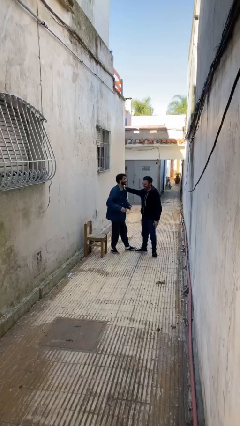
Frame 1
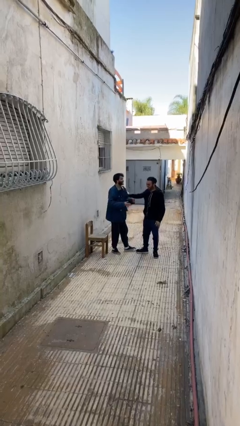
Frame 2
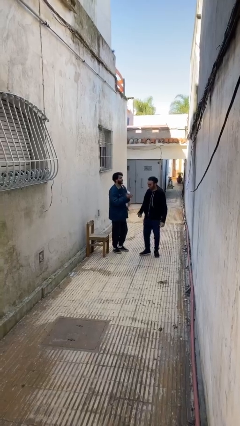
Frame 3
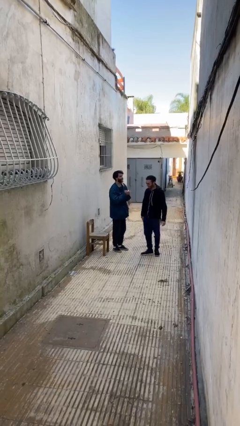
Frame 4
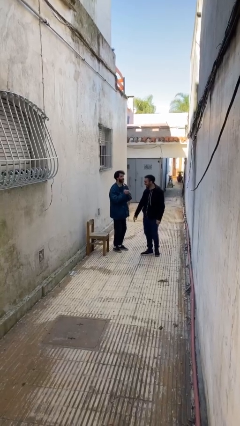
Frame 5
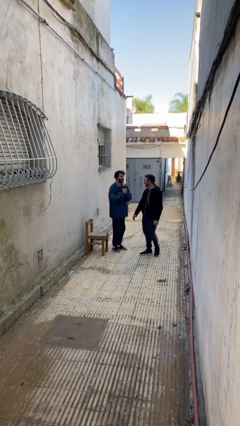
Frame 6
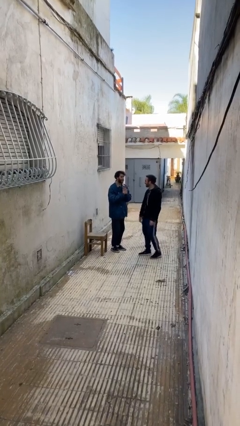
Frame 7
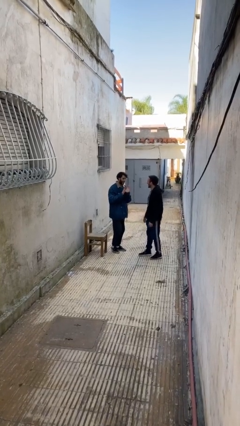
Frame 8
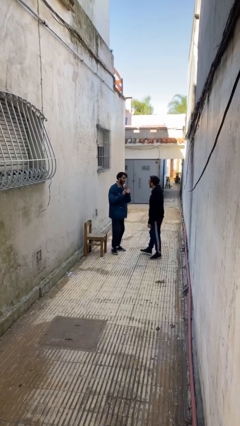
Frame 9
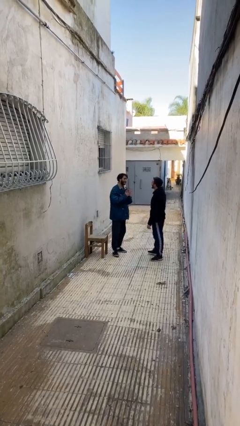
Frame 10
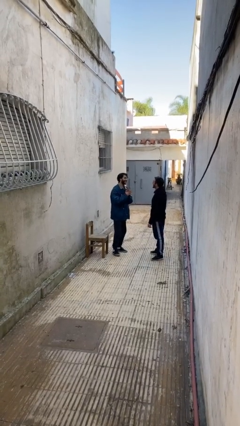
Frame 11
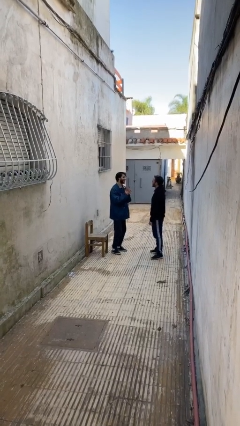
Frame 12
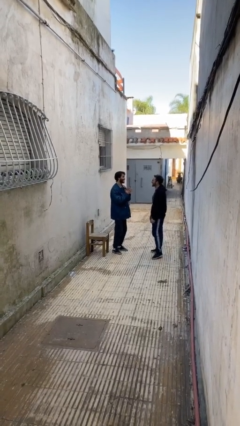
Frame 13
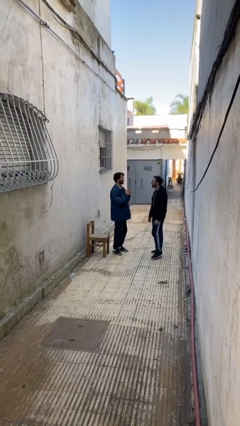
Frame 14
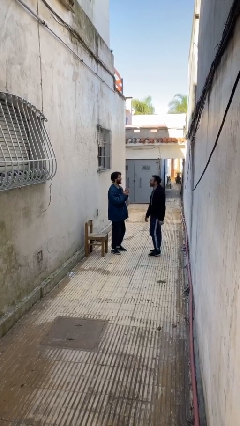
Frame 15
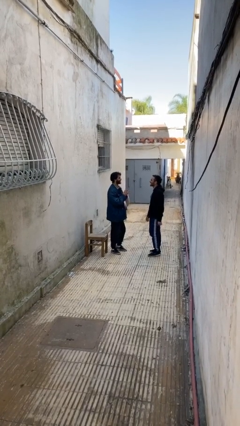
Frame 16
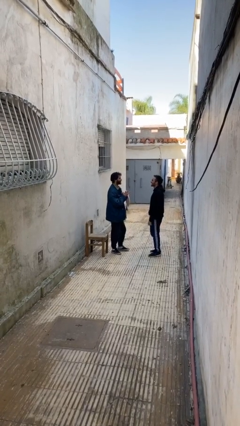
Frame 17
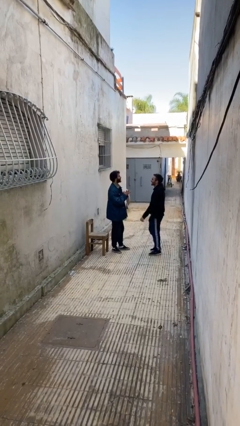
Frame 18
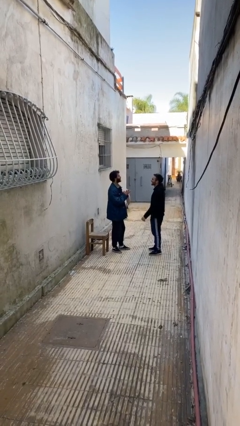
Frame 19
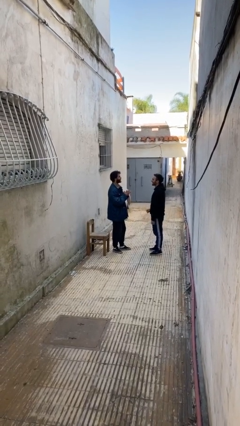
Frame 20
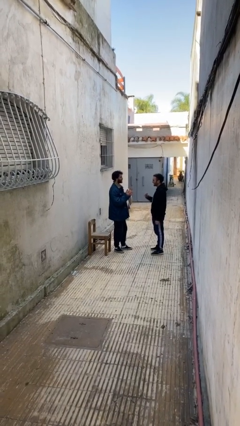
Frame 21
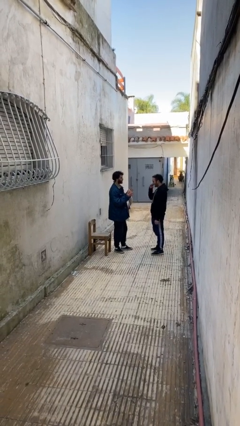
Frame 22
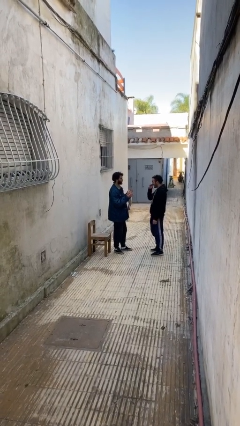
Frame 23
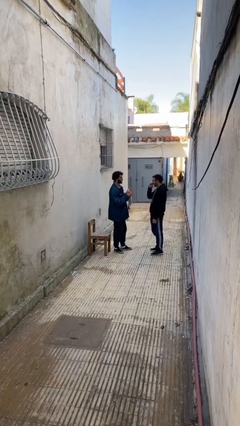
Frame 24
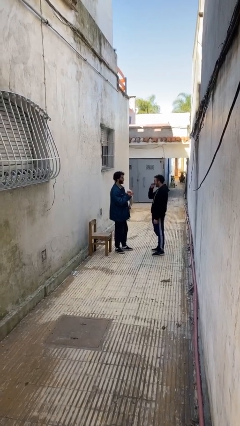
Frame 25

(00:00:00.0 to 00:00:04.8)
person talks to person

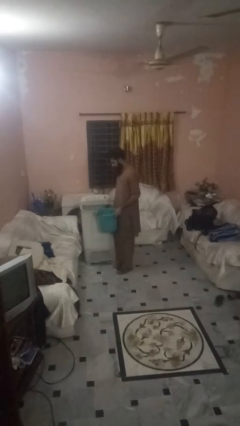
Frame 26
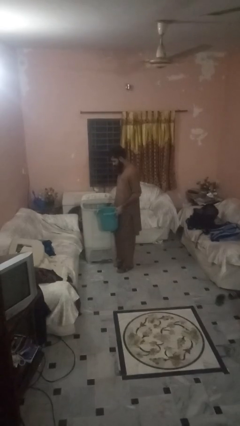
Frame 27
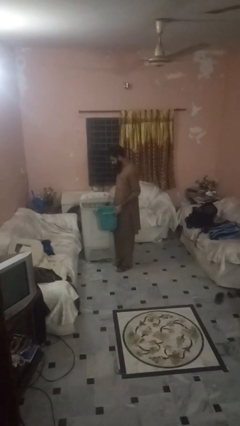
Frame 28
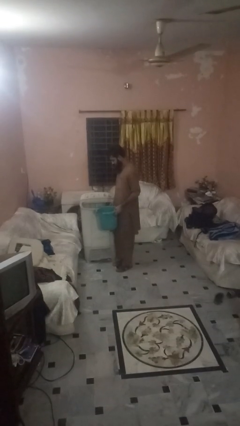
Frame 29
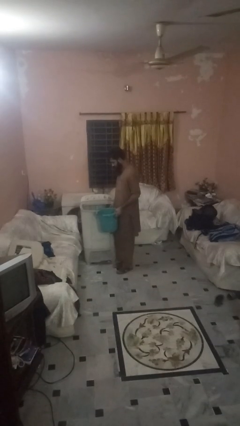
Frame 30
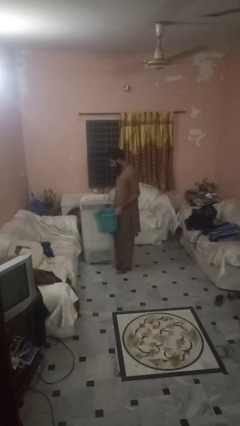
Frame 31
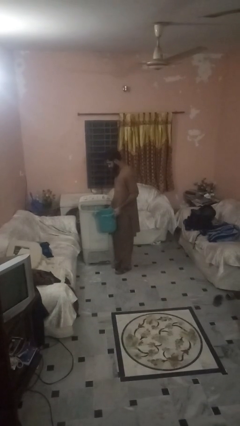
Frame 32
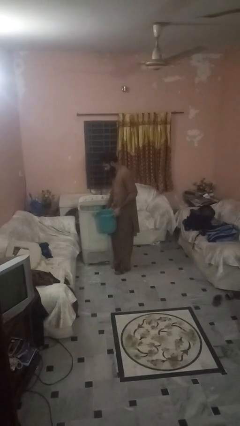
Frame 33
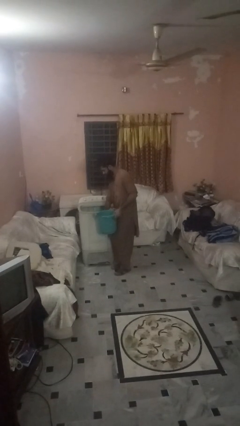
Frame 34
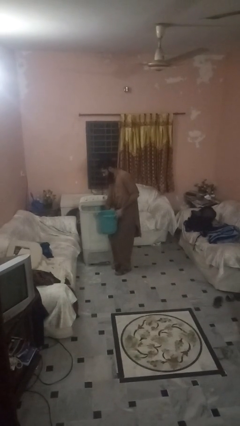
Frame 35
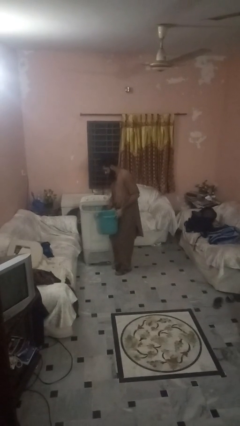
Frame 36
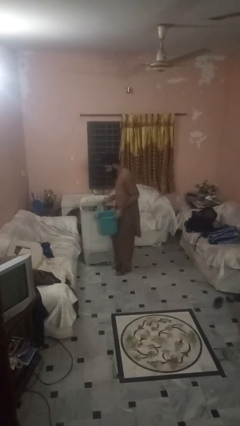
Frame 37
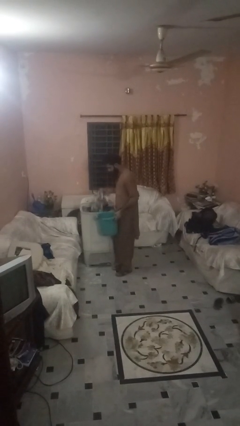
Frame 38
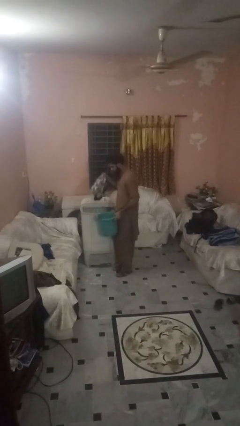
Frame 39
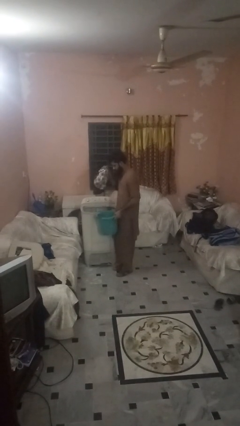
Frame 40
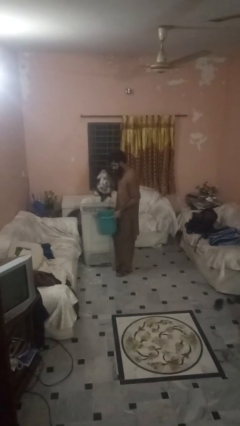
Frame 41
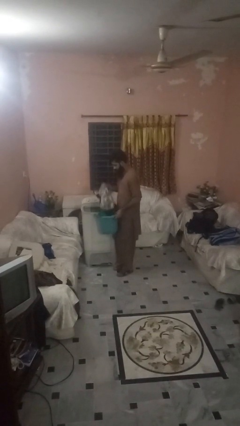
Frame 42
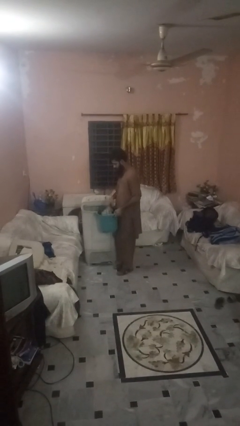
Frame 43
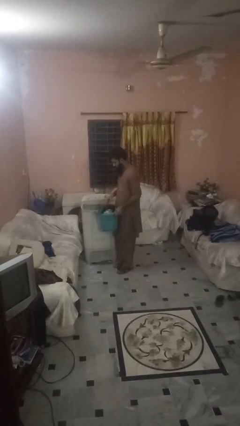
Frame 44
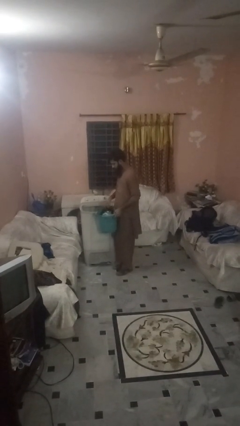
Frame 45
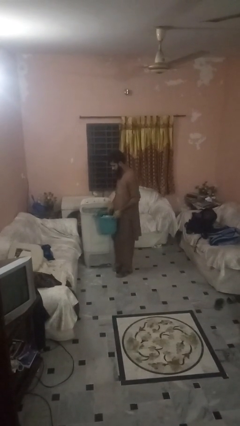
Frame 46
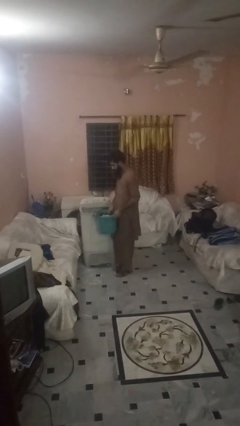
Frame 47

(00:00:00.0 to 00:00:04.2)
person unloads clotheswasher

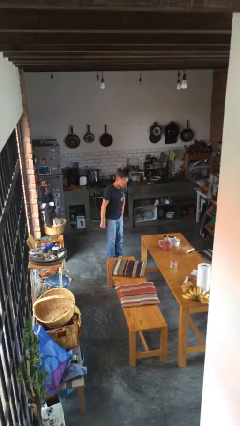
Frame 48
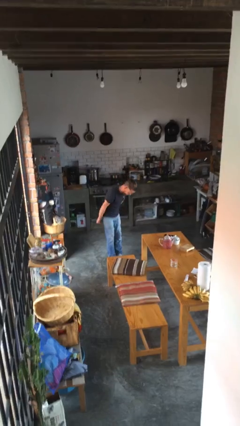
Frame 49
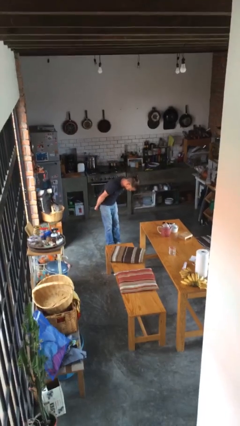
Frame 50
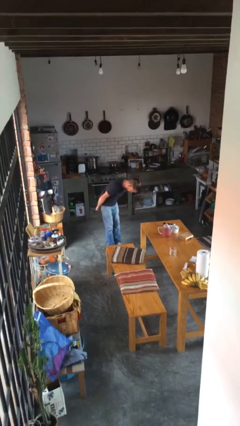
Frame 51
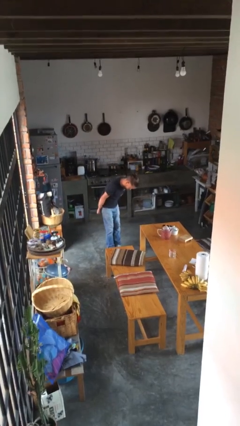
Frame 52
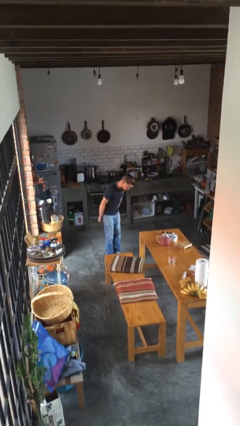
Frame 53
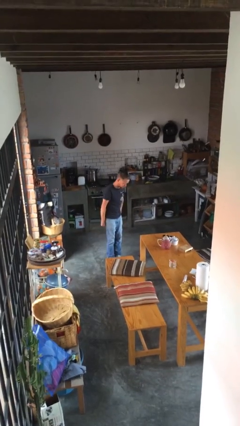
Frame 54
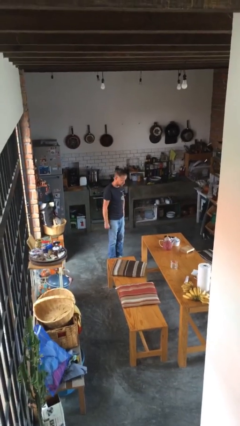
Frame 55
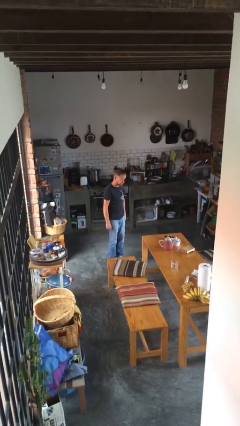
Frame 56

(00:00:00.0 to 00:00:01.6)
person bows

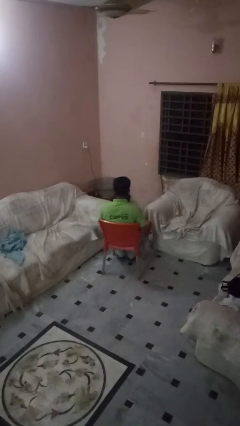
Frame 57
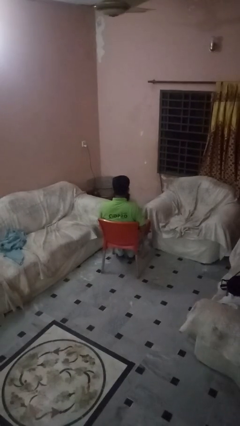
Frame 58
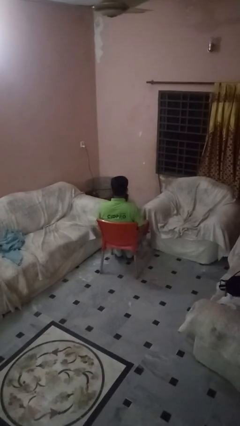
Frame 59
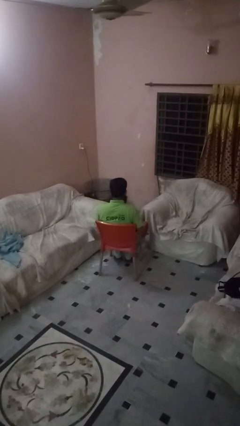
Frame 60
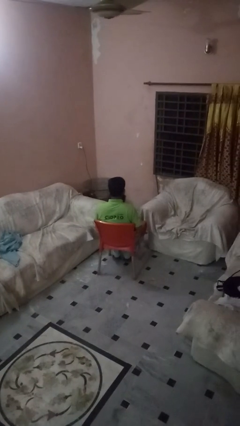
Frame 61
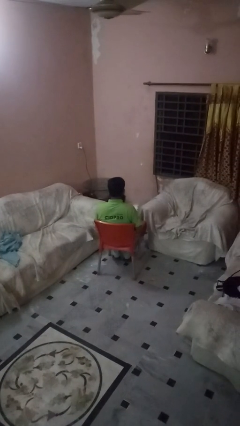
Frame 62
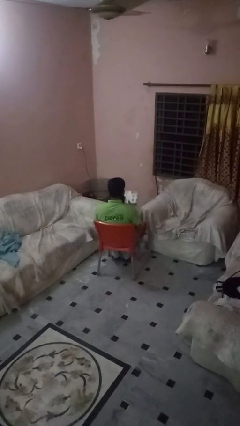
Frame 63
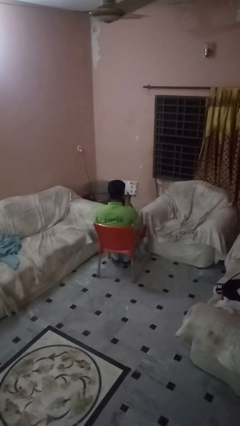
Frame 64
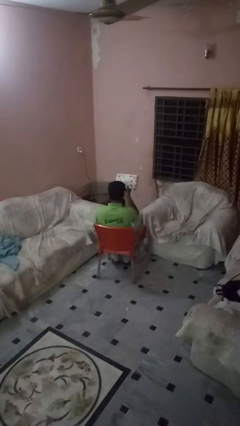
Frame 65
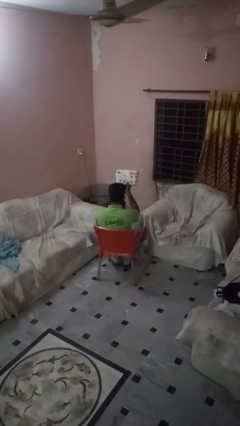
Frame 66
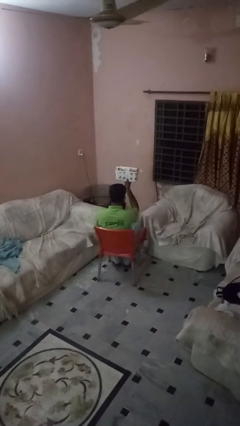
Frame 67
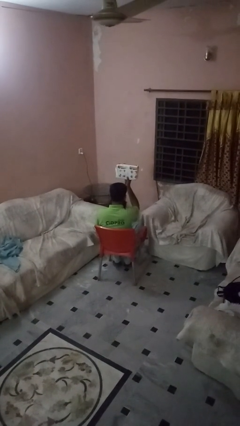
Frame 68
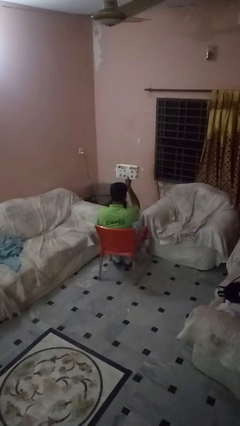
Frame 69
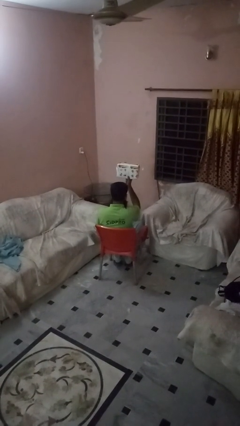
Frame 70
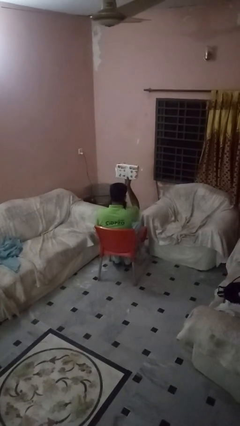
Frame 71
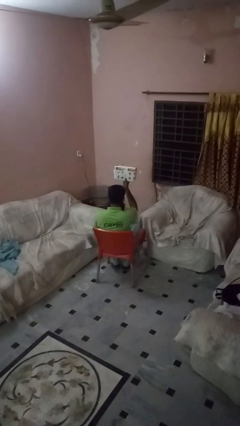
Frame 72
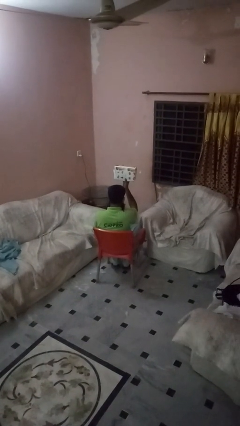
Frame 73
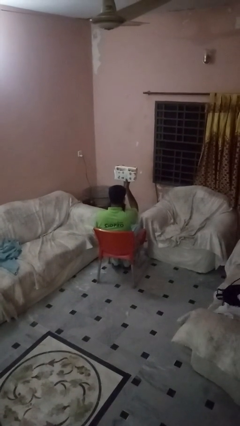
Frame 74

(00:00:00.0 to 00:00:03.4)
person holds object above head

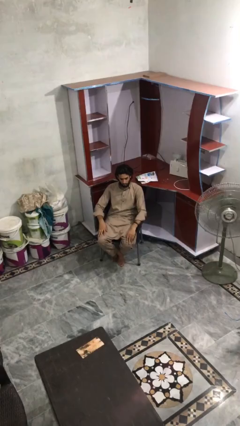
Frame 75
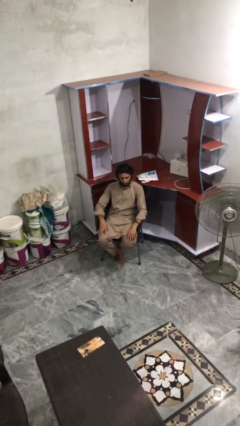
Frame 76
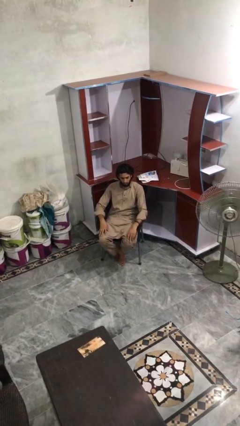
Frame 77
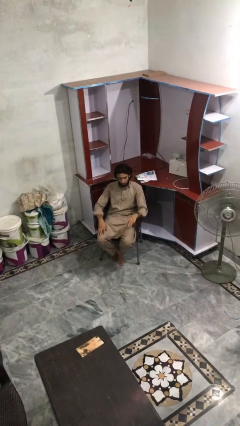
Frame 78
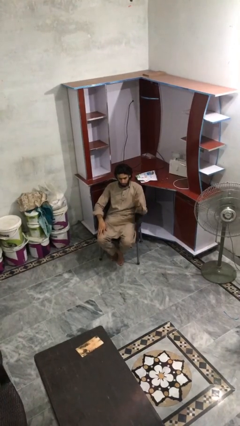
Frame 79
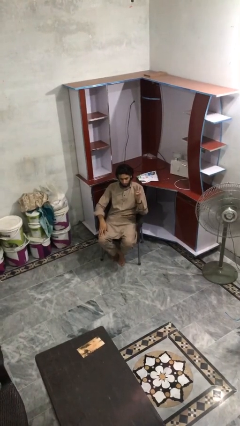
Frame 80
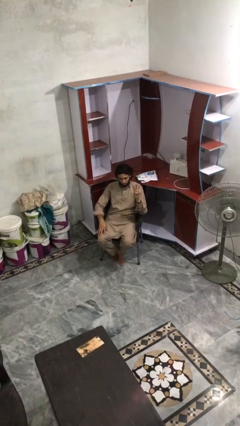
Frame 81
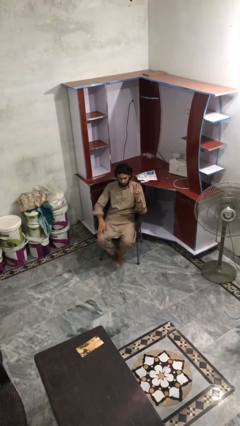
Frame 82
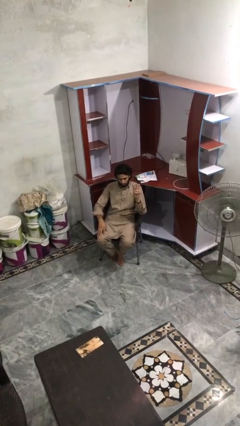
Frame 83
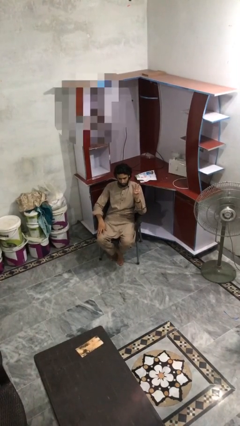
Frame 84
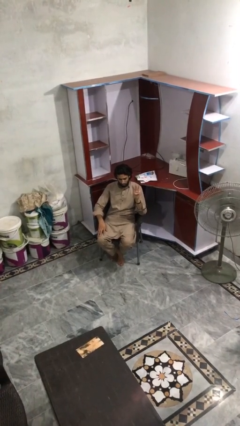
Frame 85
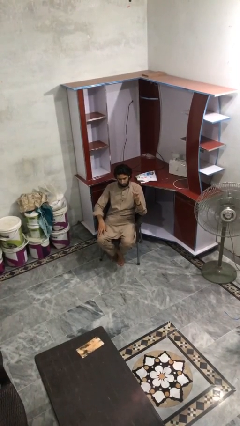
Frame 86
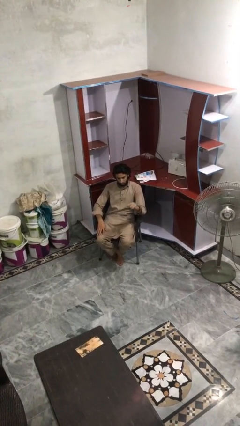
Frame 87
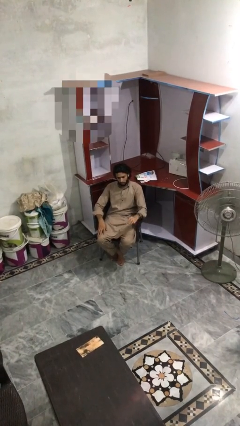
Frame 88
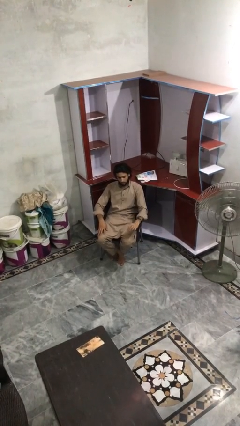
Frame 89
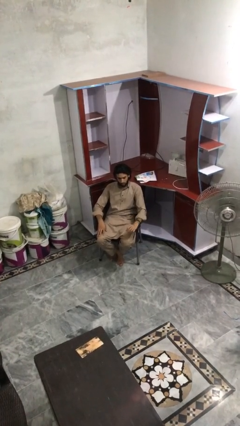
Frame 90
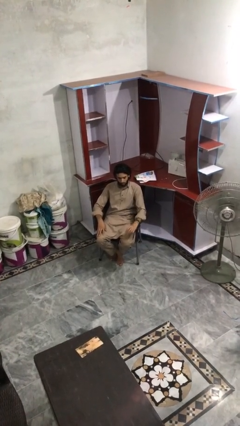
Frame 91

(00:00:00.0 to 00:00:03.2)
person gestures number three

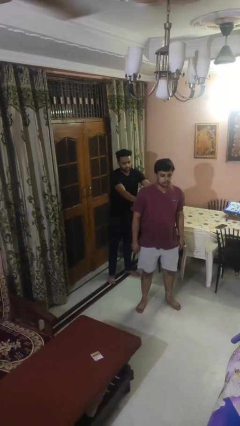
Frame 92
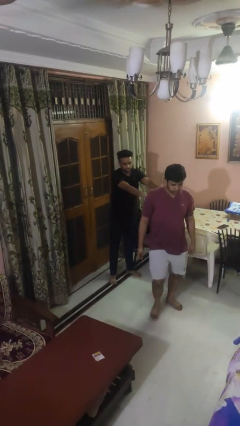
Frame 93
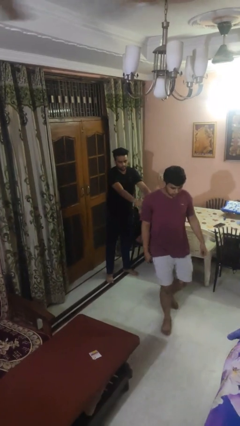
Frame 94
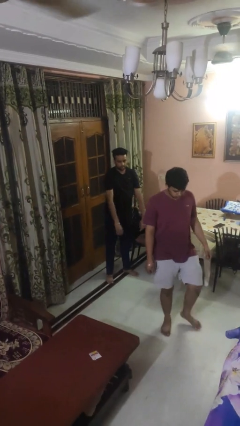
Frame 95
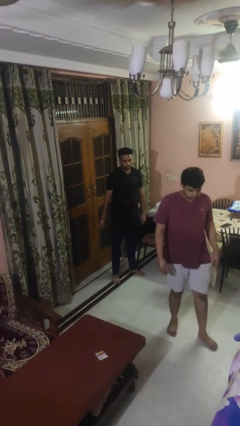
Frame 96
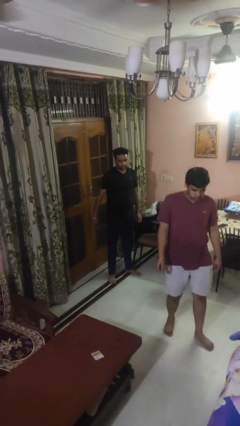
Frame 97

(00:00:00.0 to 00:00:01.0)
person shoves person
